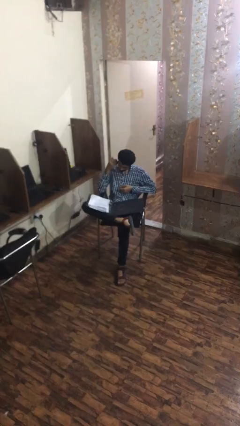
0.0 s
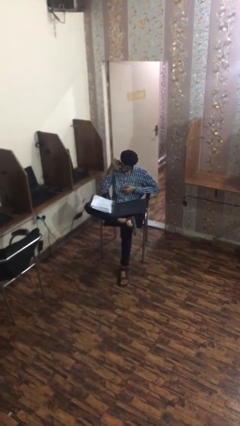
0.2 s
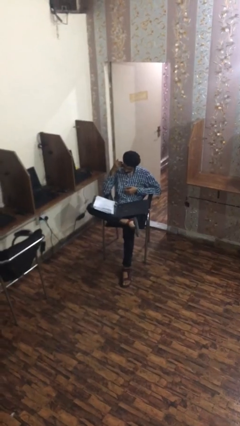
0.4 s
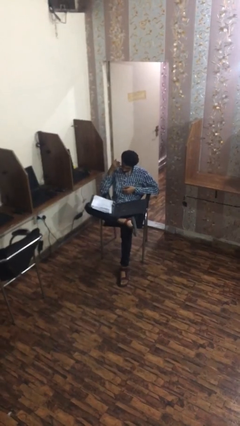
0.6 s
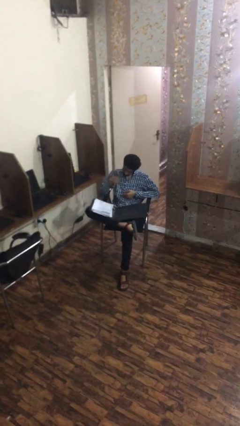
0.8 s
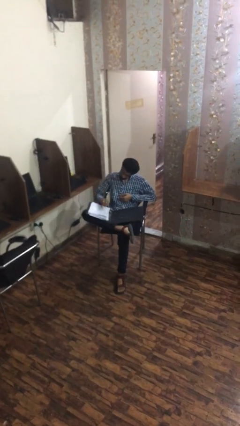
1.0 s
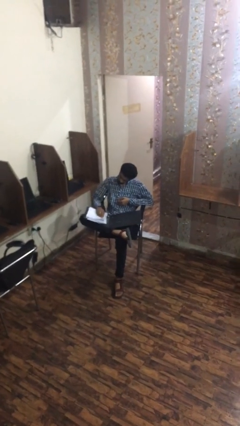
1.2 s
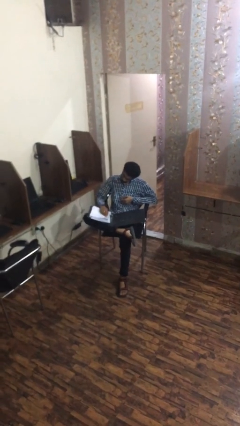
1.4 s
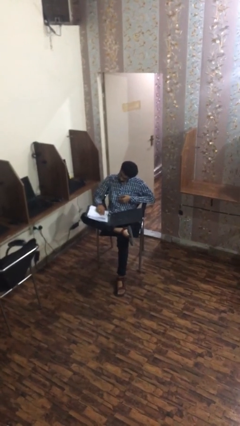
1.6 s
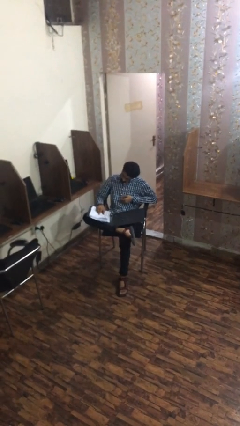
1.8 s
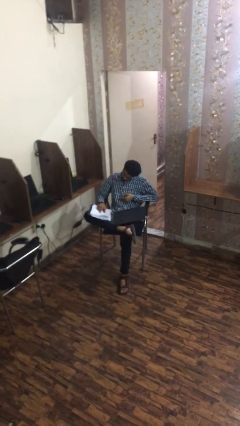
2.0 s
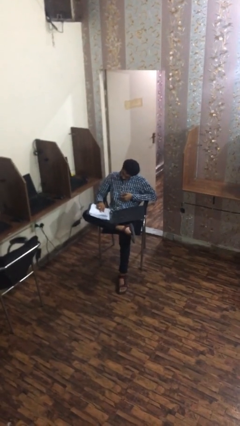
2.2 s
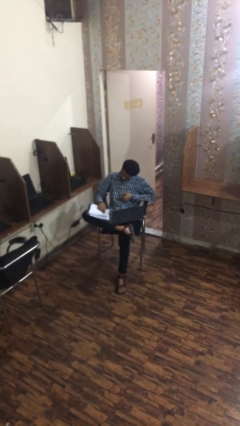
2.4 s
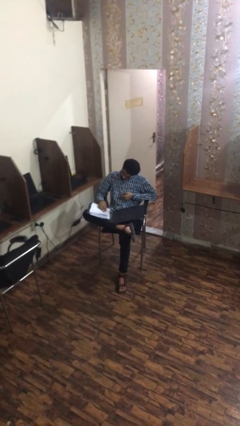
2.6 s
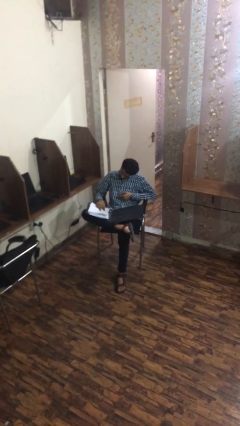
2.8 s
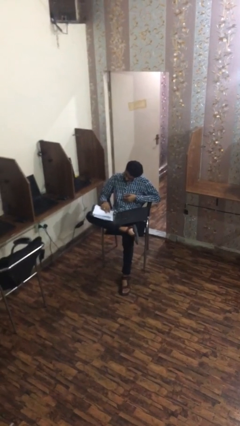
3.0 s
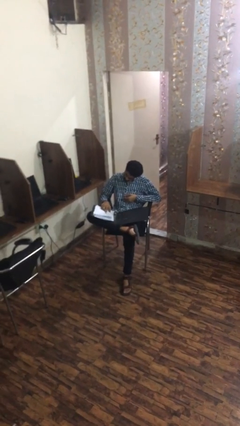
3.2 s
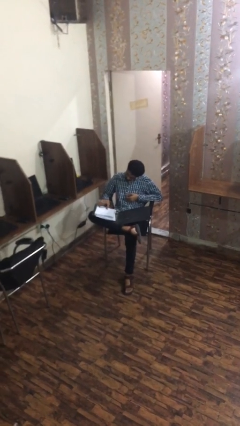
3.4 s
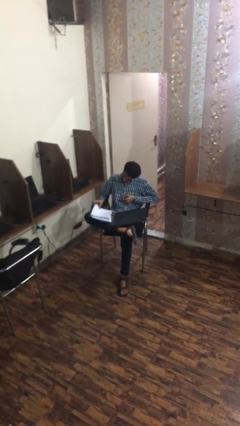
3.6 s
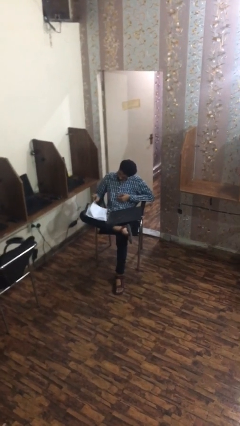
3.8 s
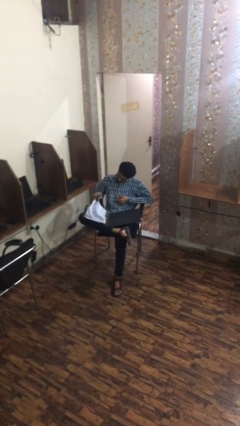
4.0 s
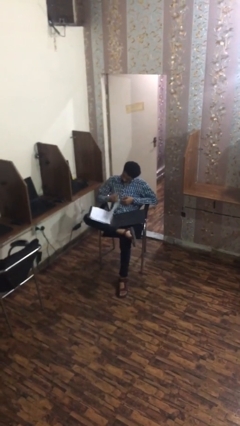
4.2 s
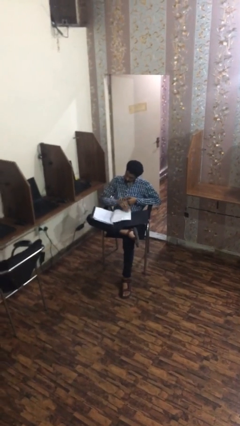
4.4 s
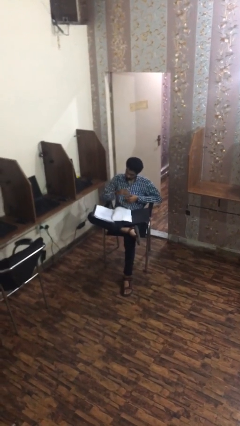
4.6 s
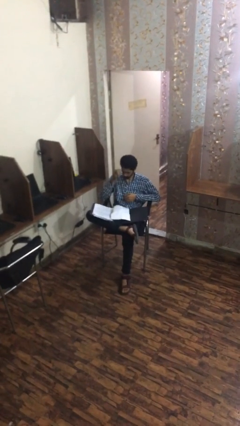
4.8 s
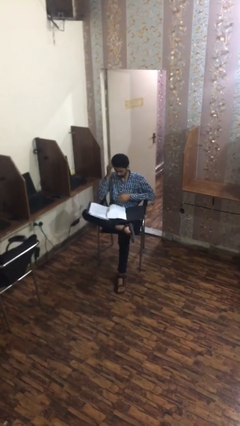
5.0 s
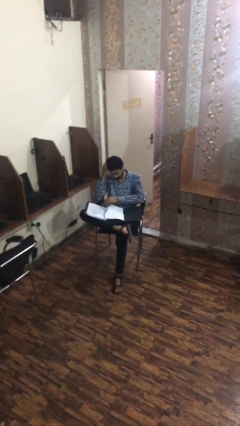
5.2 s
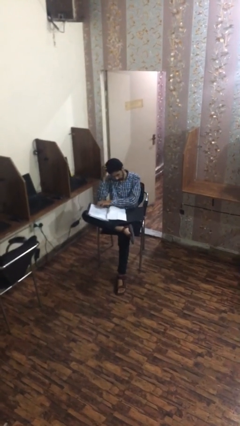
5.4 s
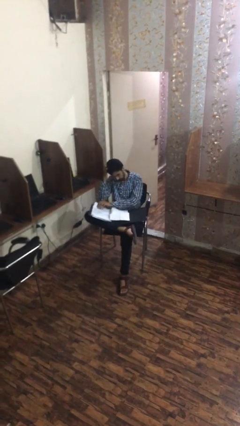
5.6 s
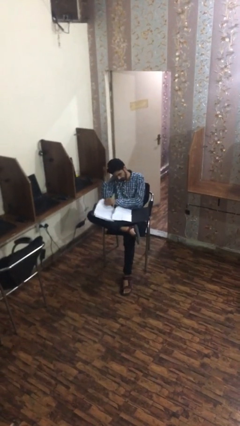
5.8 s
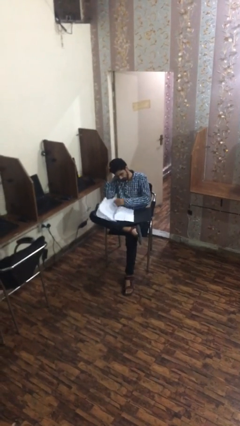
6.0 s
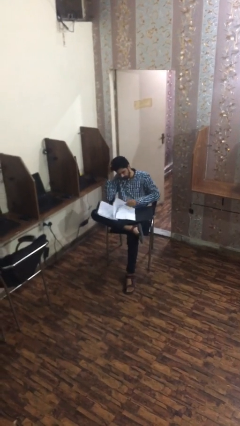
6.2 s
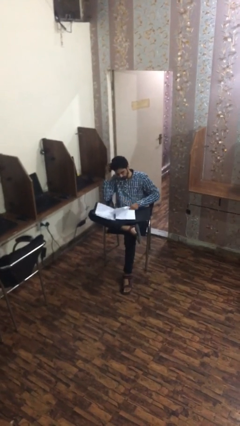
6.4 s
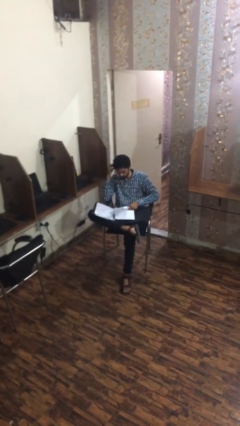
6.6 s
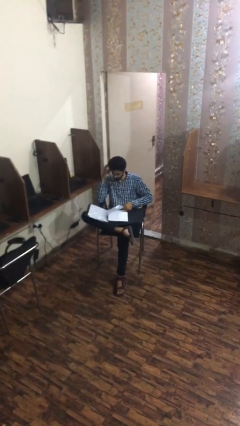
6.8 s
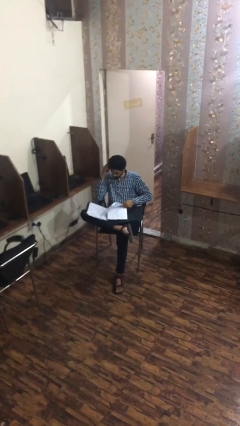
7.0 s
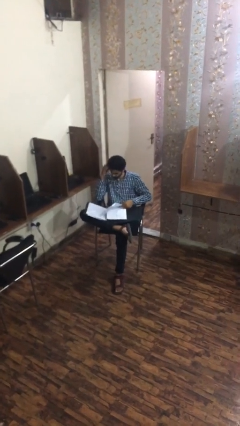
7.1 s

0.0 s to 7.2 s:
person reads document

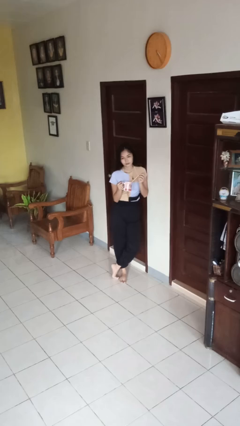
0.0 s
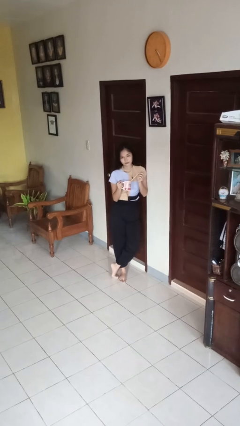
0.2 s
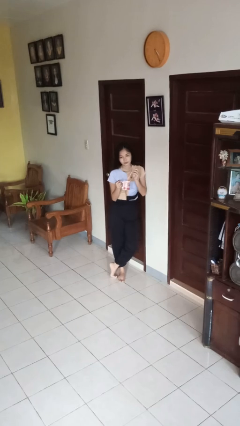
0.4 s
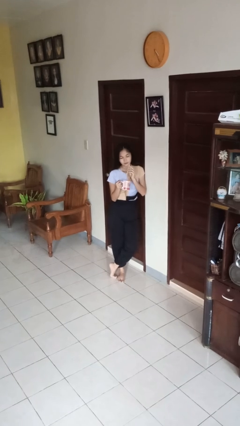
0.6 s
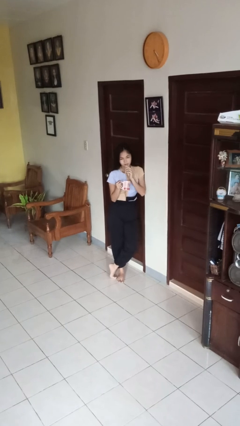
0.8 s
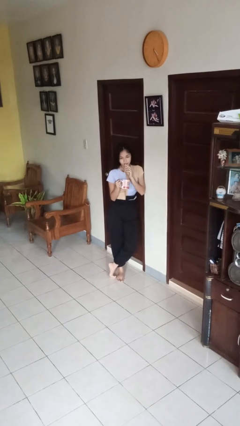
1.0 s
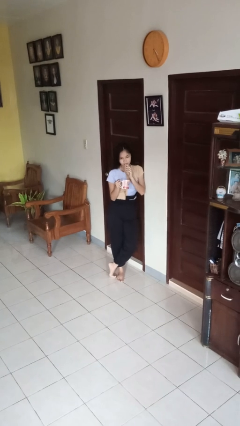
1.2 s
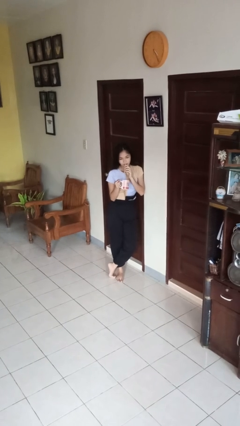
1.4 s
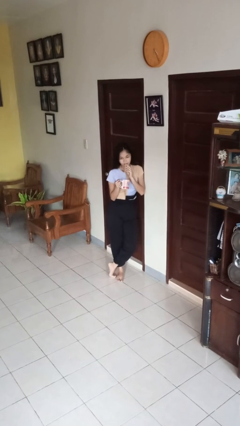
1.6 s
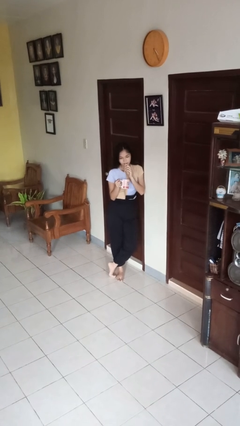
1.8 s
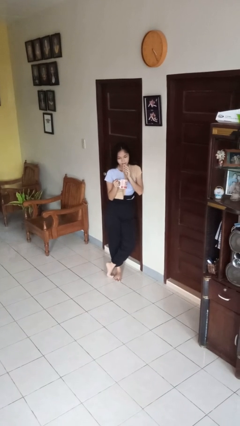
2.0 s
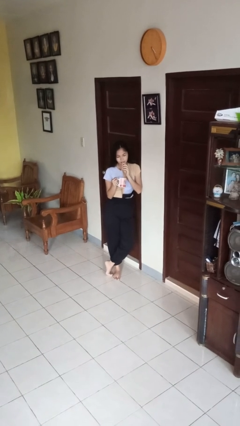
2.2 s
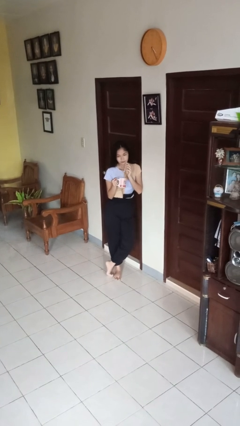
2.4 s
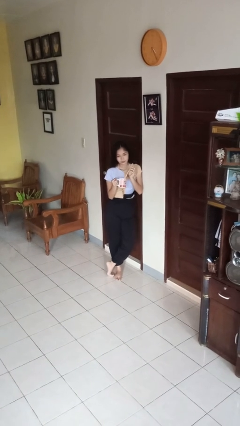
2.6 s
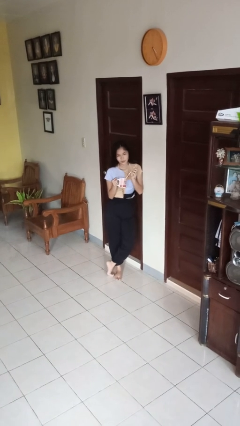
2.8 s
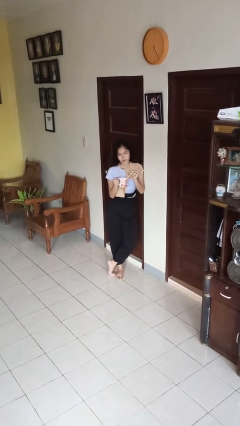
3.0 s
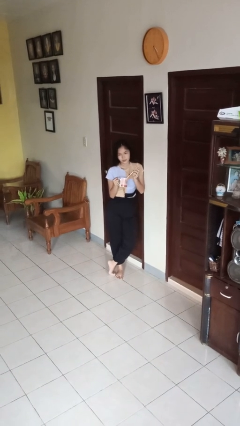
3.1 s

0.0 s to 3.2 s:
person drinks from straw

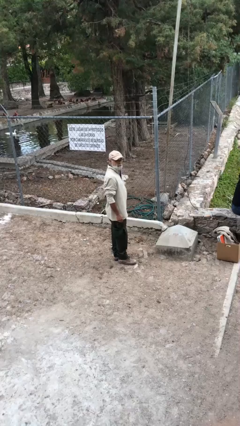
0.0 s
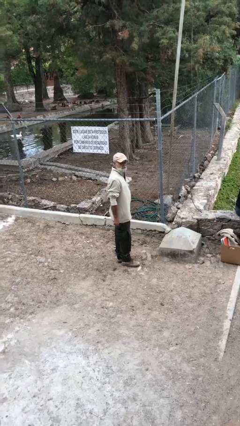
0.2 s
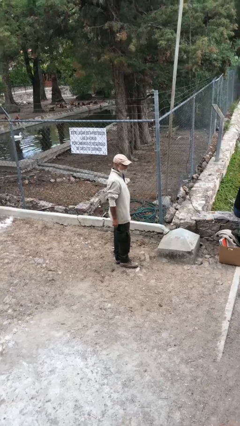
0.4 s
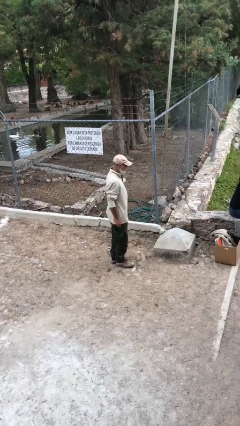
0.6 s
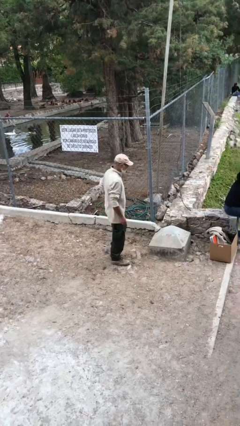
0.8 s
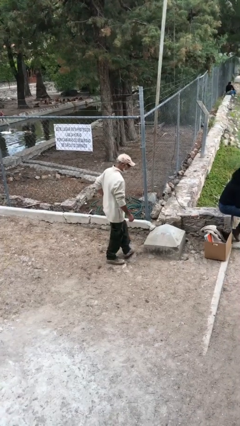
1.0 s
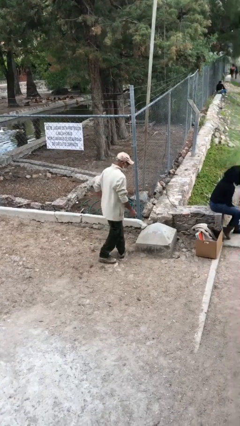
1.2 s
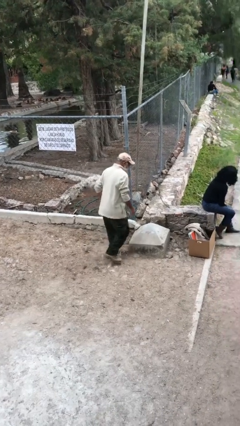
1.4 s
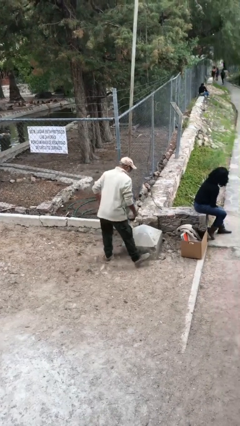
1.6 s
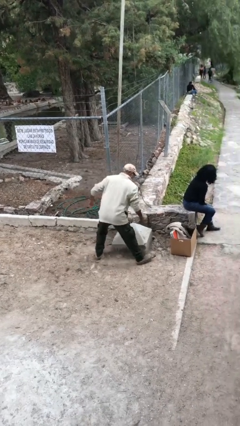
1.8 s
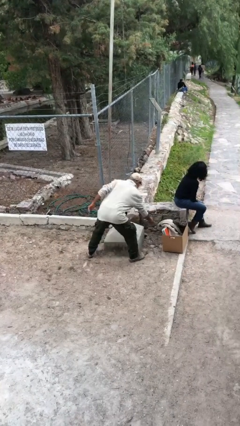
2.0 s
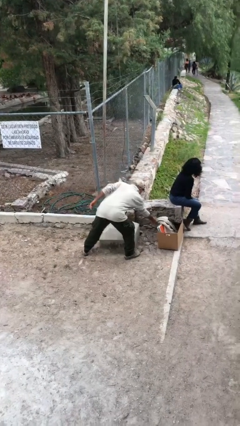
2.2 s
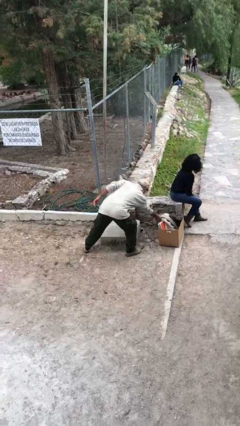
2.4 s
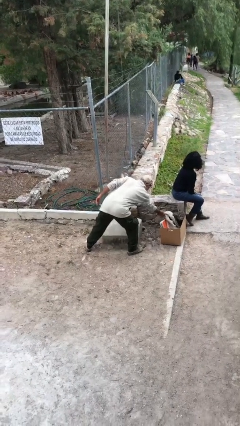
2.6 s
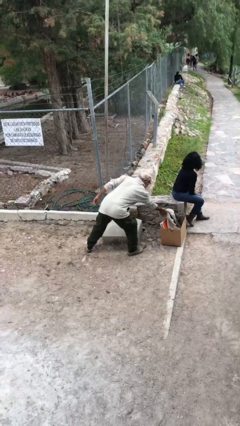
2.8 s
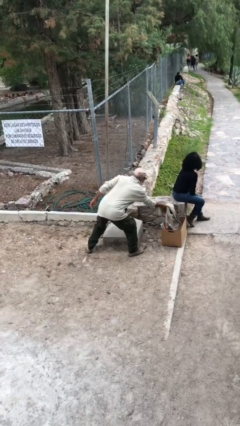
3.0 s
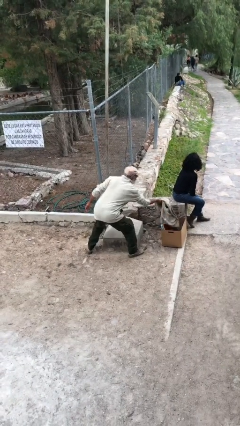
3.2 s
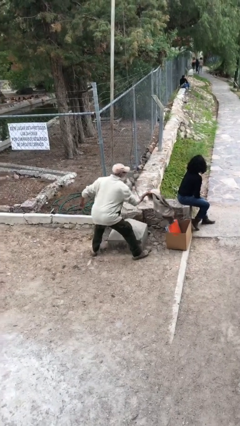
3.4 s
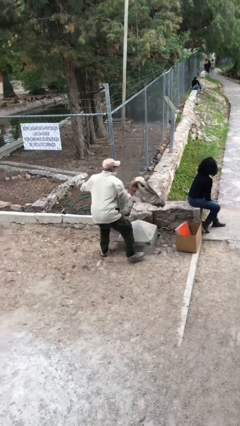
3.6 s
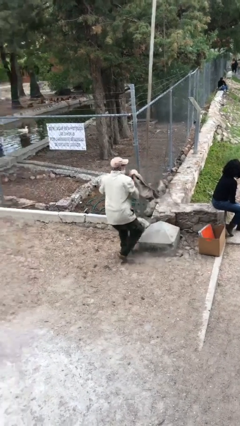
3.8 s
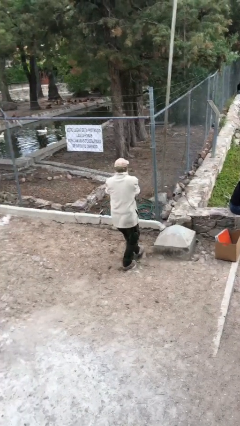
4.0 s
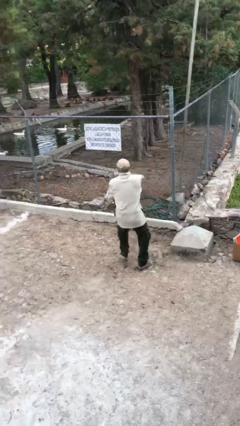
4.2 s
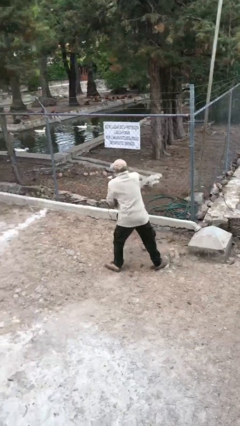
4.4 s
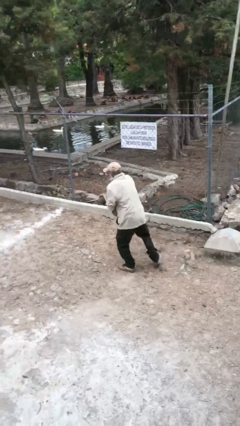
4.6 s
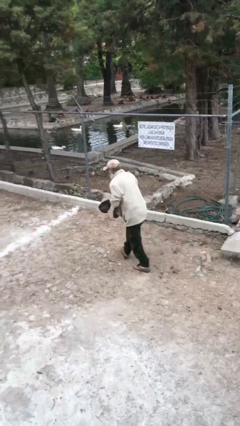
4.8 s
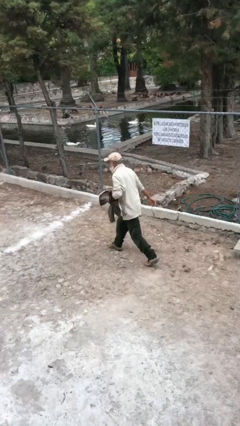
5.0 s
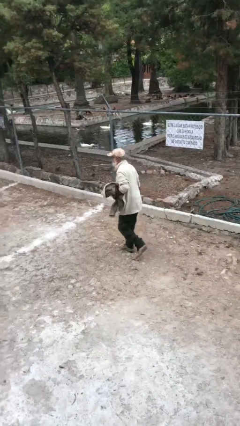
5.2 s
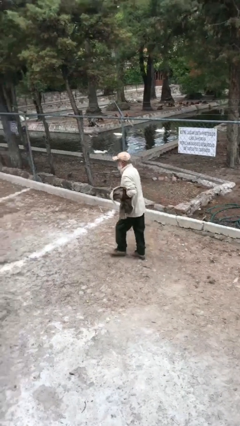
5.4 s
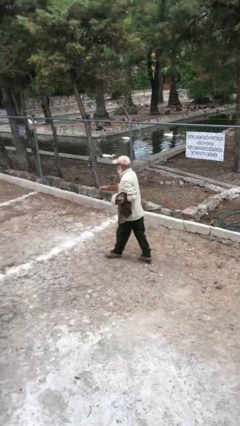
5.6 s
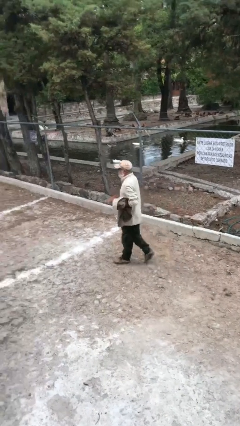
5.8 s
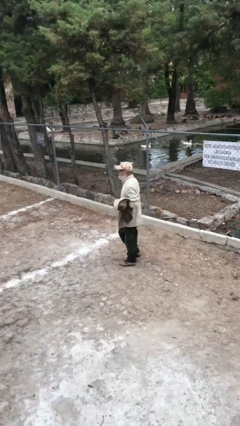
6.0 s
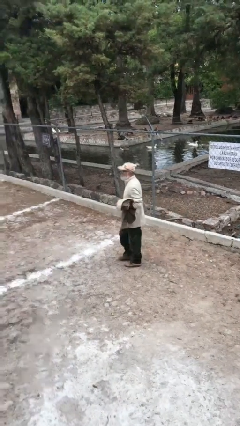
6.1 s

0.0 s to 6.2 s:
person steals object from person

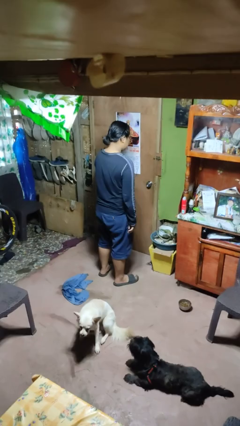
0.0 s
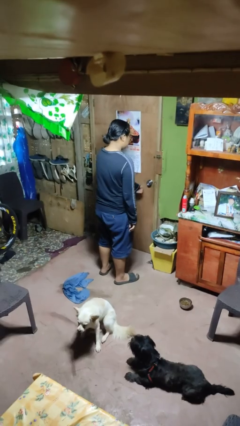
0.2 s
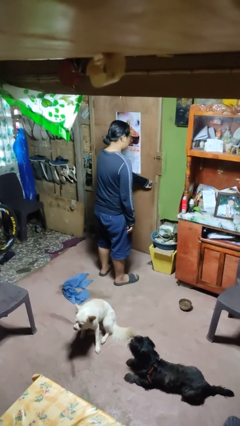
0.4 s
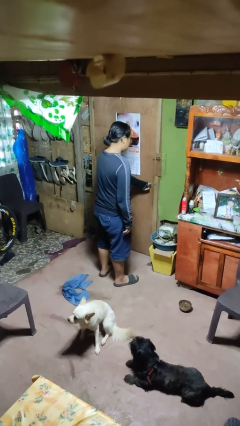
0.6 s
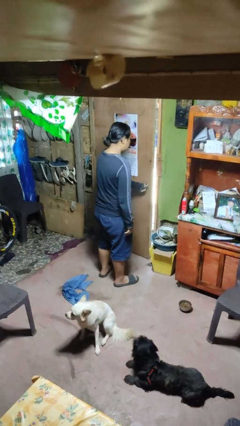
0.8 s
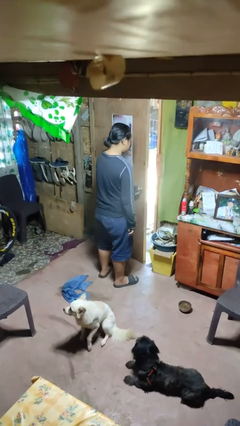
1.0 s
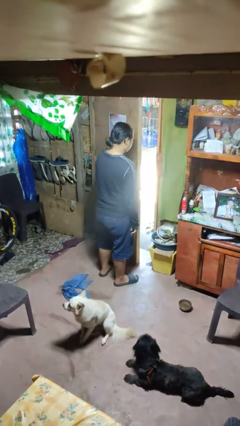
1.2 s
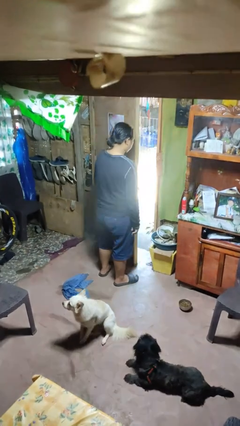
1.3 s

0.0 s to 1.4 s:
person opens facility door
